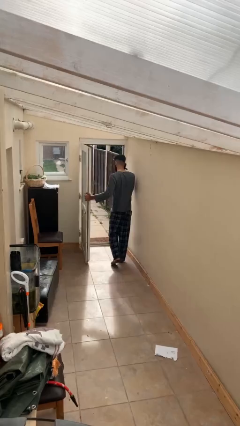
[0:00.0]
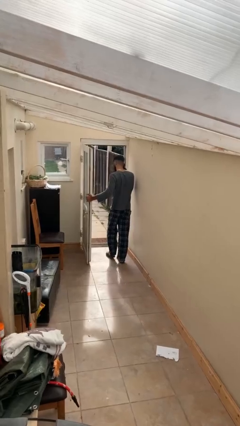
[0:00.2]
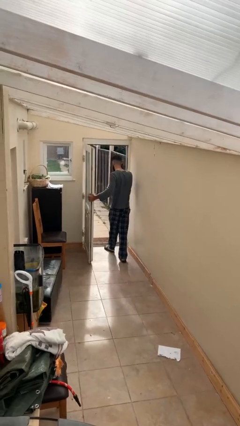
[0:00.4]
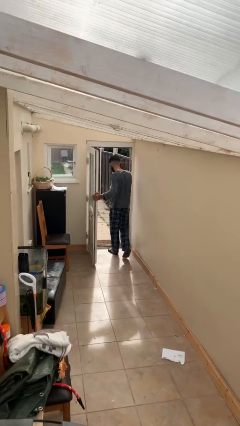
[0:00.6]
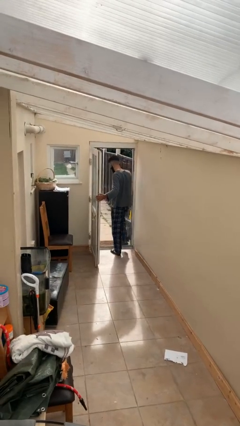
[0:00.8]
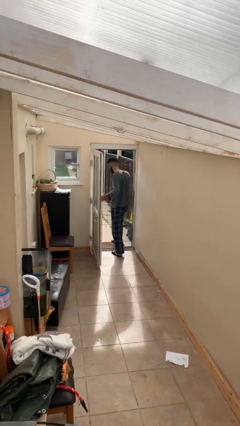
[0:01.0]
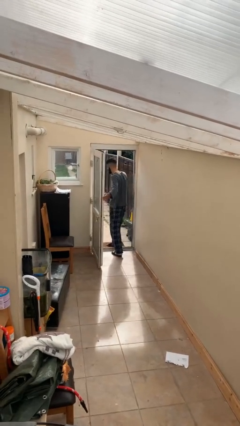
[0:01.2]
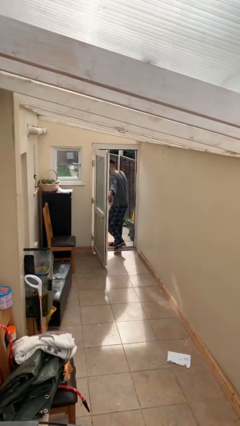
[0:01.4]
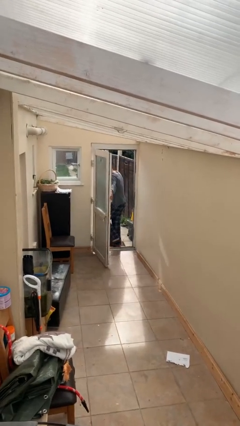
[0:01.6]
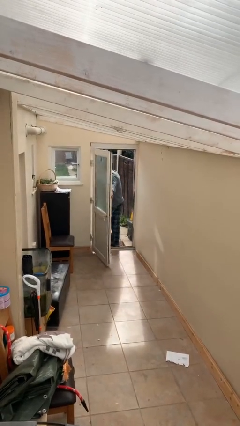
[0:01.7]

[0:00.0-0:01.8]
person exits scene through structure

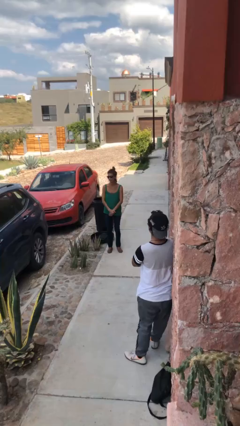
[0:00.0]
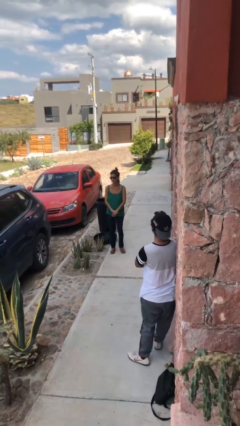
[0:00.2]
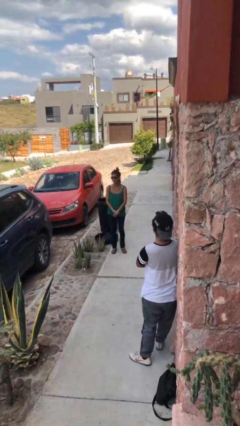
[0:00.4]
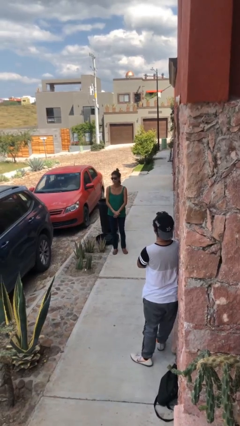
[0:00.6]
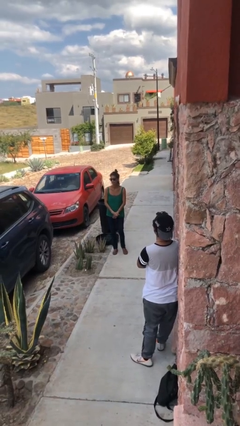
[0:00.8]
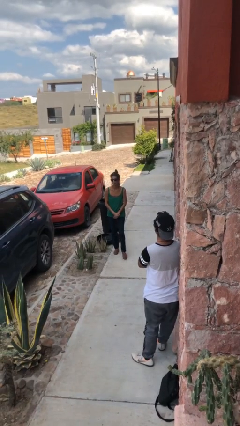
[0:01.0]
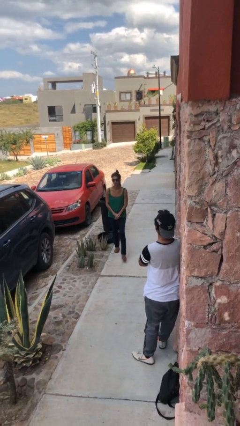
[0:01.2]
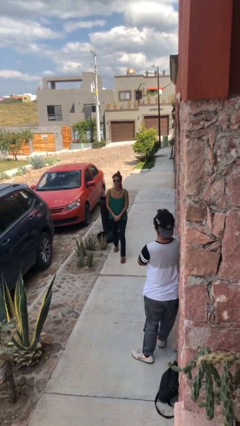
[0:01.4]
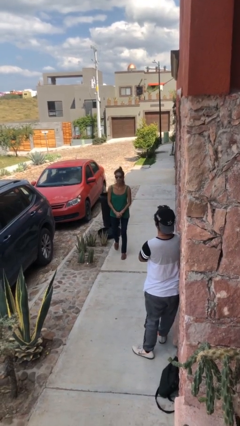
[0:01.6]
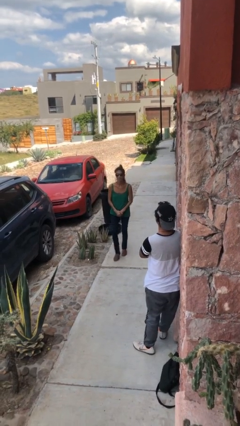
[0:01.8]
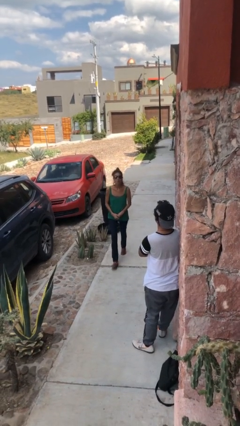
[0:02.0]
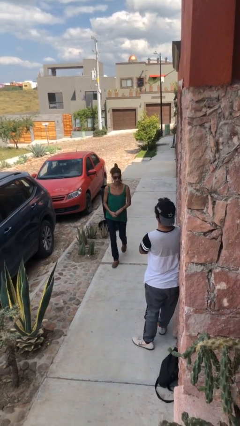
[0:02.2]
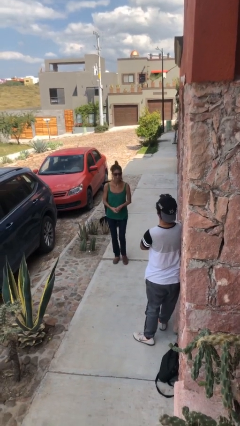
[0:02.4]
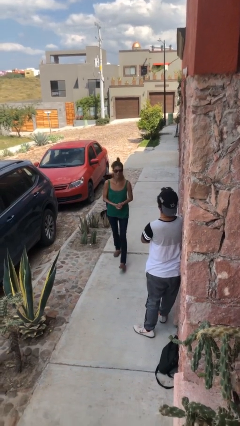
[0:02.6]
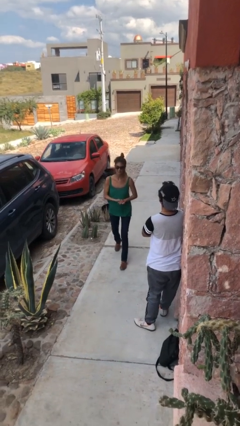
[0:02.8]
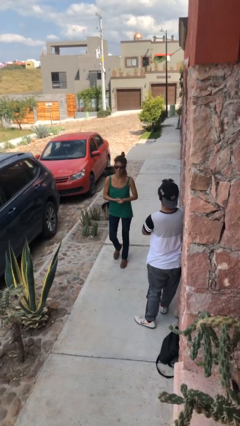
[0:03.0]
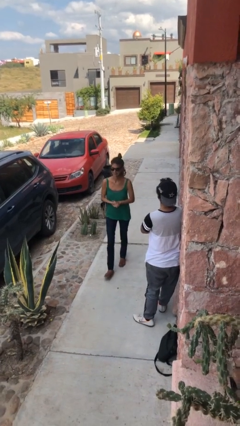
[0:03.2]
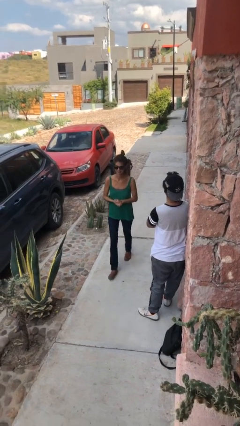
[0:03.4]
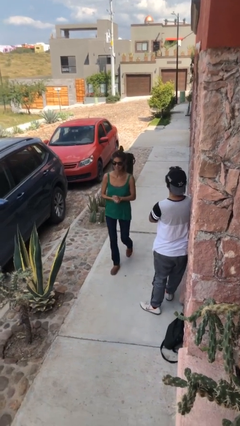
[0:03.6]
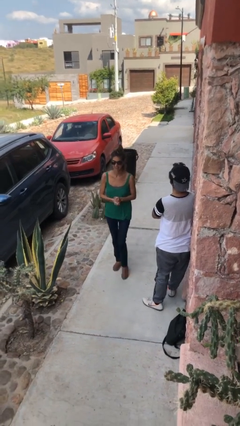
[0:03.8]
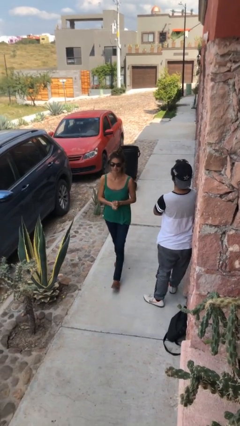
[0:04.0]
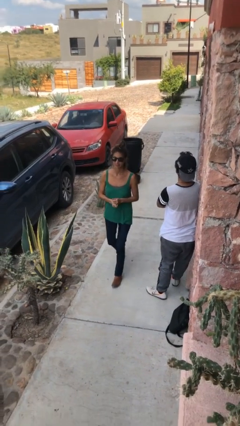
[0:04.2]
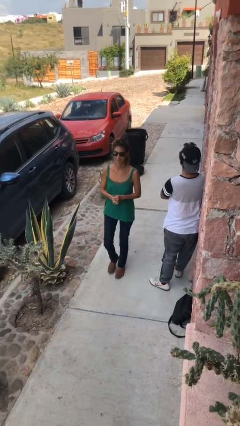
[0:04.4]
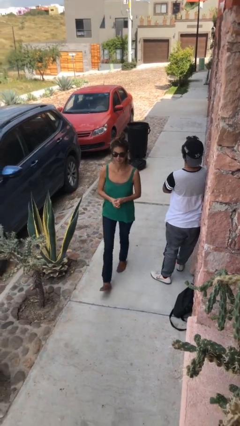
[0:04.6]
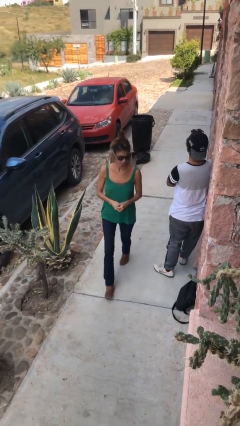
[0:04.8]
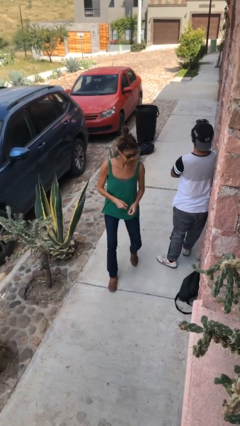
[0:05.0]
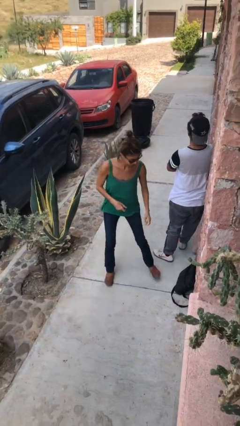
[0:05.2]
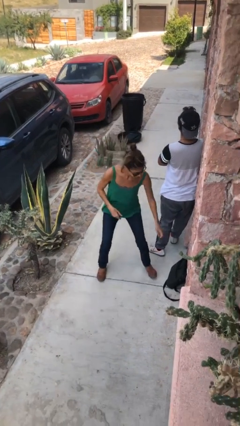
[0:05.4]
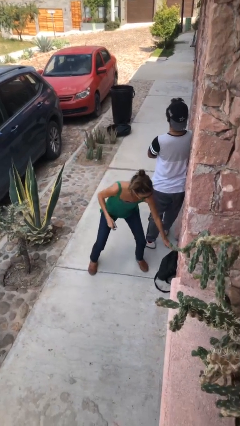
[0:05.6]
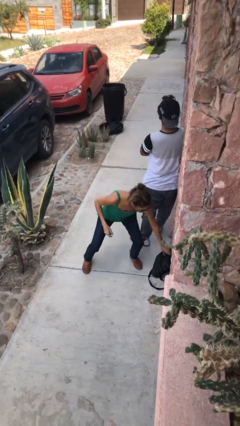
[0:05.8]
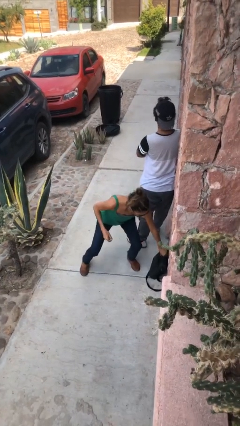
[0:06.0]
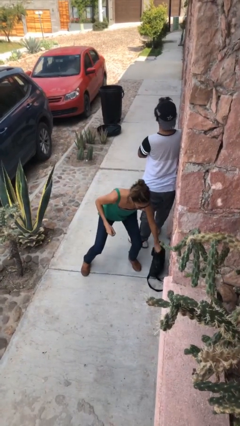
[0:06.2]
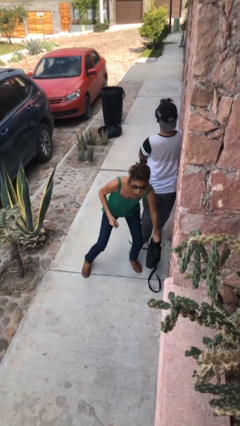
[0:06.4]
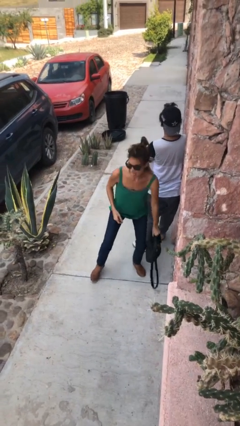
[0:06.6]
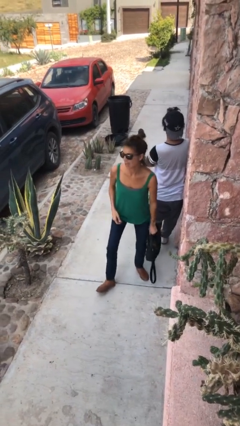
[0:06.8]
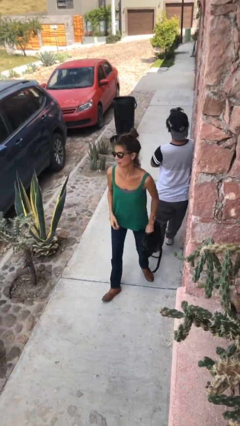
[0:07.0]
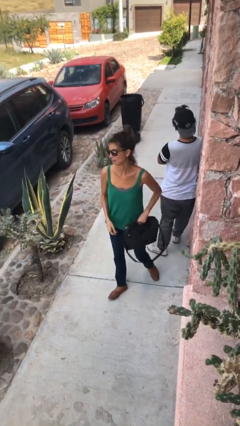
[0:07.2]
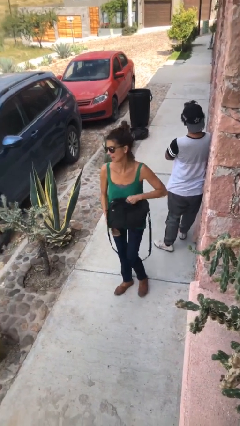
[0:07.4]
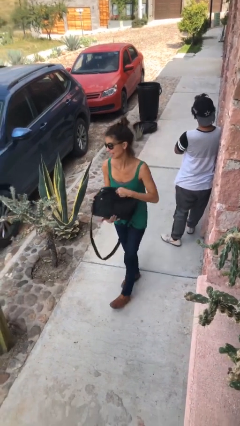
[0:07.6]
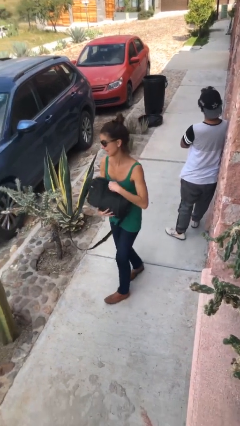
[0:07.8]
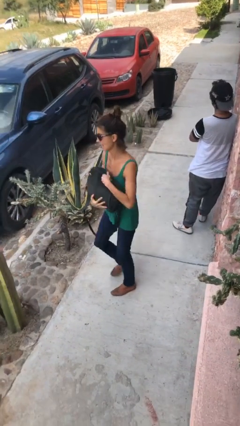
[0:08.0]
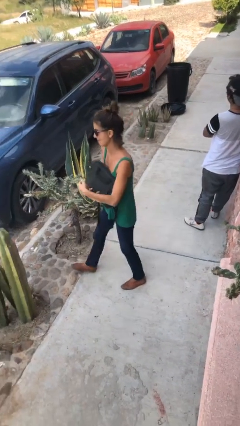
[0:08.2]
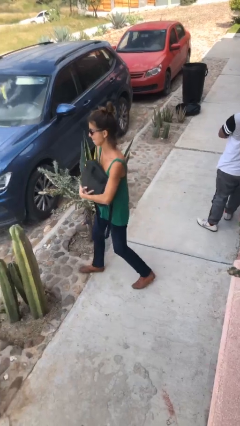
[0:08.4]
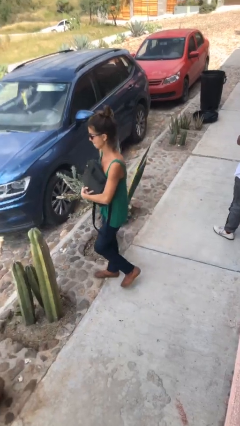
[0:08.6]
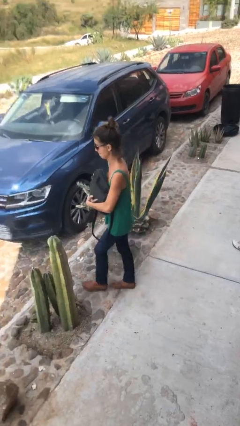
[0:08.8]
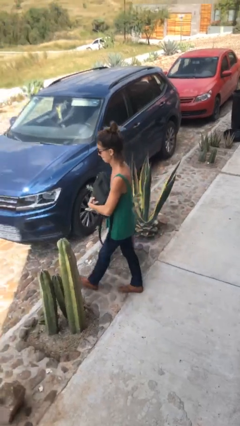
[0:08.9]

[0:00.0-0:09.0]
person steals object from person

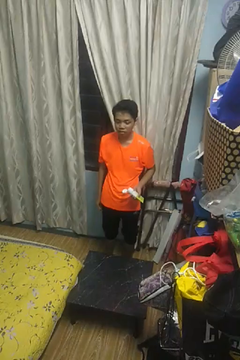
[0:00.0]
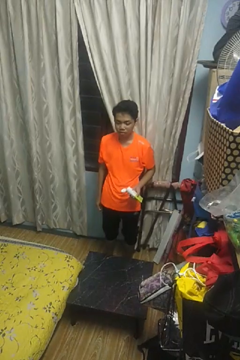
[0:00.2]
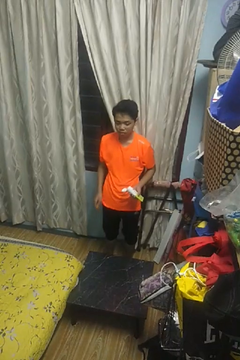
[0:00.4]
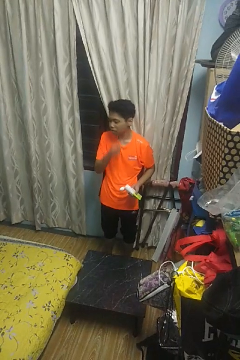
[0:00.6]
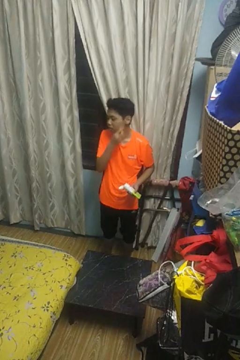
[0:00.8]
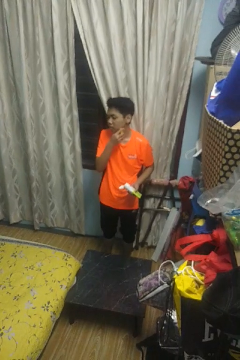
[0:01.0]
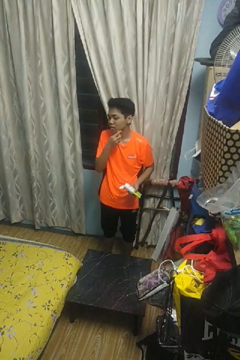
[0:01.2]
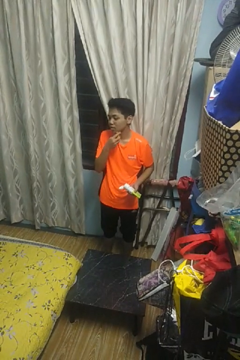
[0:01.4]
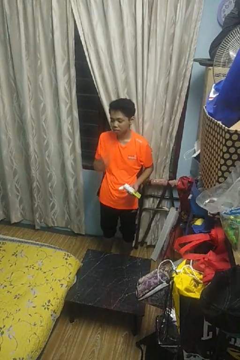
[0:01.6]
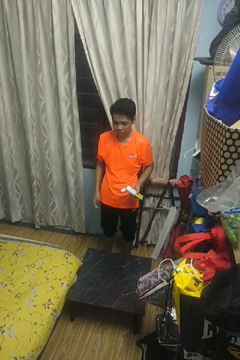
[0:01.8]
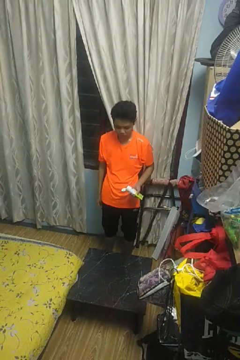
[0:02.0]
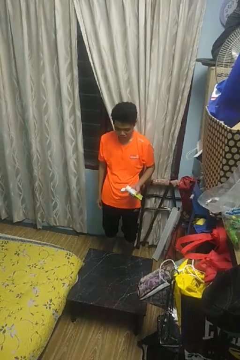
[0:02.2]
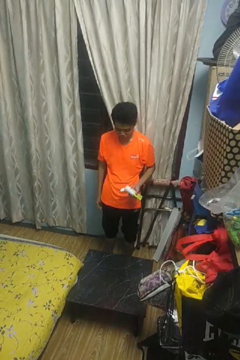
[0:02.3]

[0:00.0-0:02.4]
person shaves face

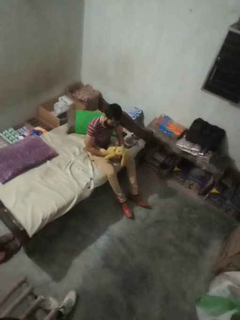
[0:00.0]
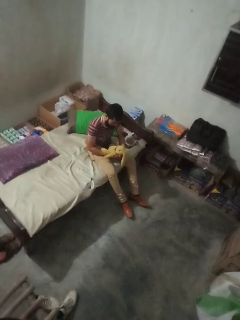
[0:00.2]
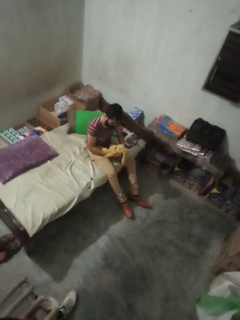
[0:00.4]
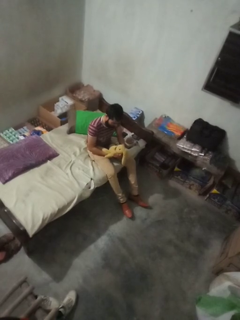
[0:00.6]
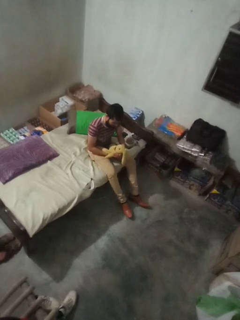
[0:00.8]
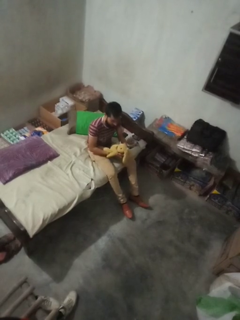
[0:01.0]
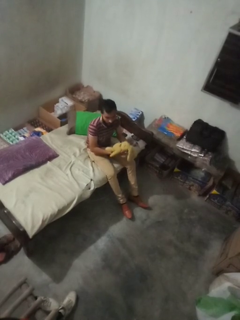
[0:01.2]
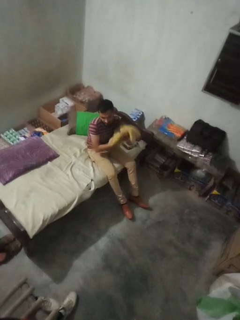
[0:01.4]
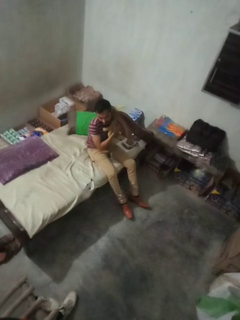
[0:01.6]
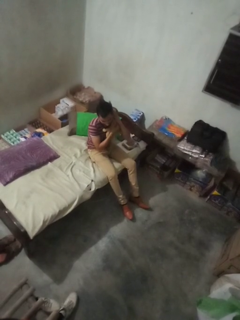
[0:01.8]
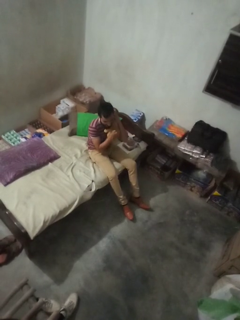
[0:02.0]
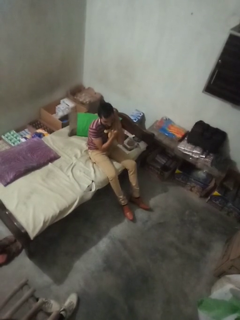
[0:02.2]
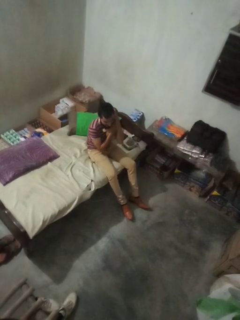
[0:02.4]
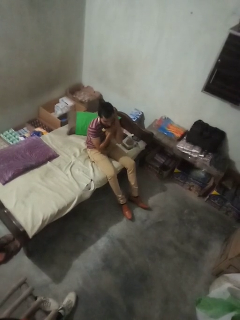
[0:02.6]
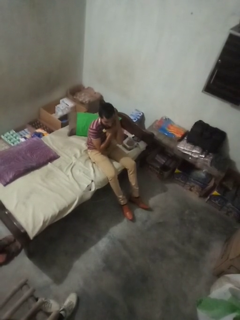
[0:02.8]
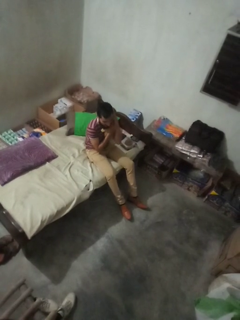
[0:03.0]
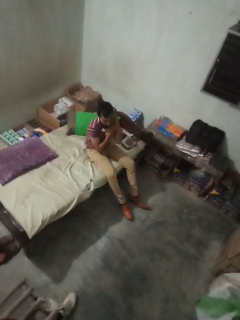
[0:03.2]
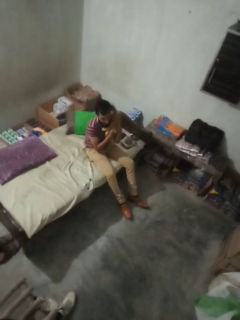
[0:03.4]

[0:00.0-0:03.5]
person hugs stuffed animal

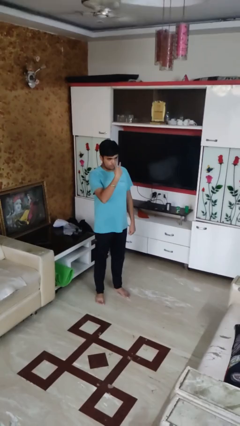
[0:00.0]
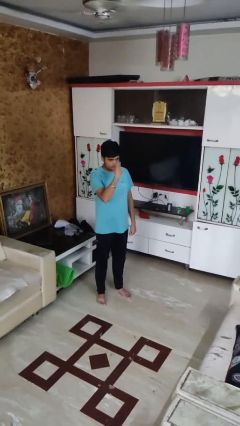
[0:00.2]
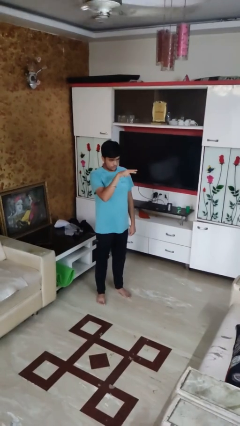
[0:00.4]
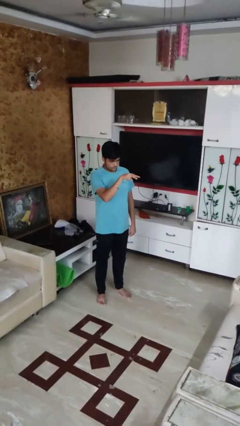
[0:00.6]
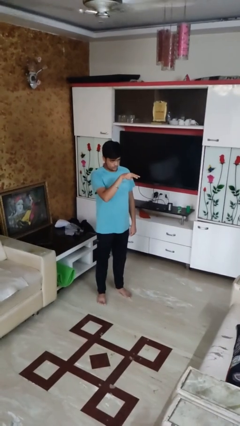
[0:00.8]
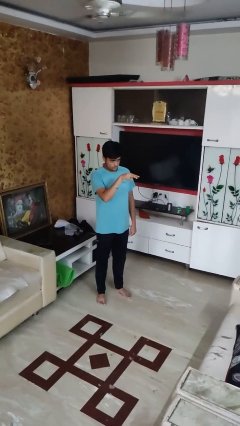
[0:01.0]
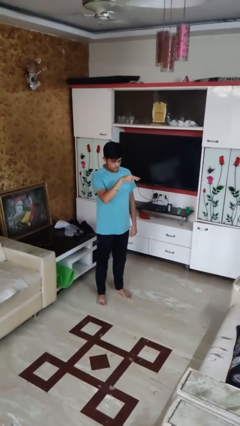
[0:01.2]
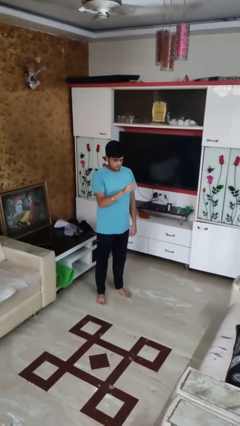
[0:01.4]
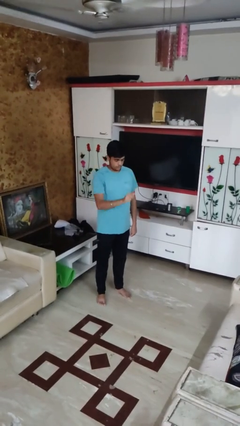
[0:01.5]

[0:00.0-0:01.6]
person gestures watch closely

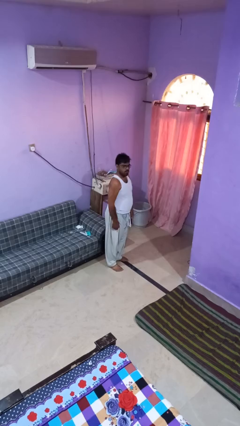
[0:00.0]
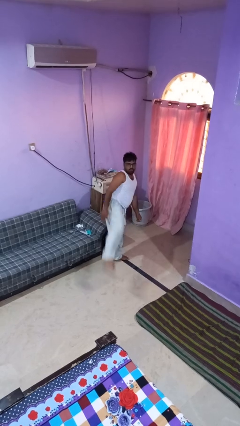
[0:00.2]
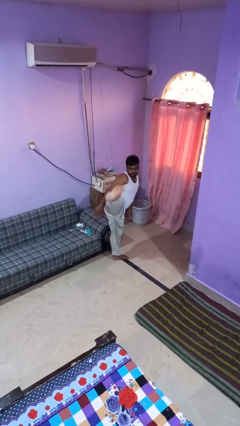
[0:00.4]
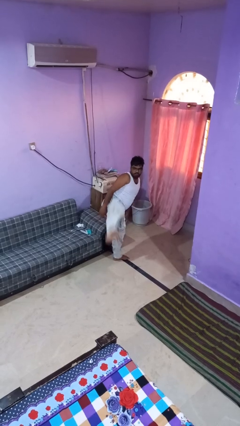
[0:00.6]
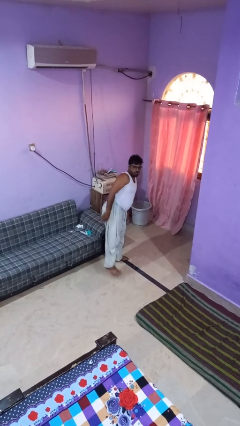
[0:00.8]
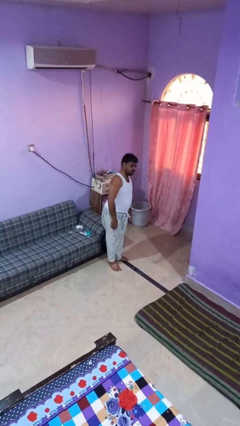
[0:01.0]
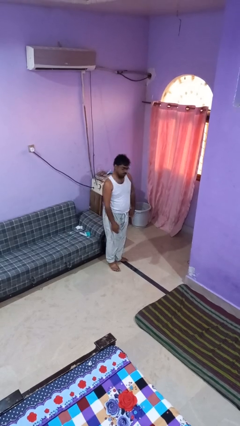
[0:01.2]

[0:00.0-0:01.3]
person karate kicks
